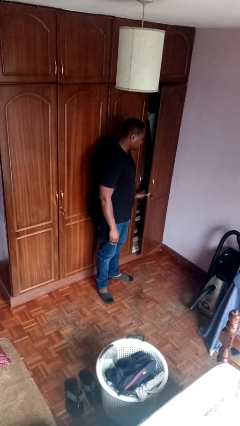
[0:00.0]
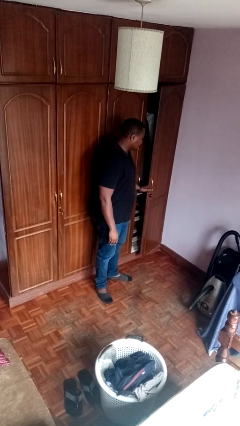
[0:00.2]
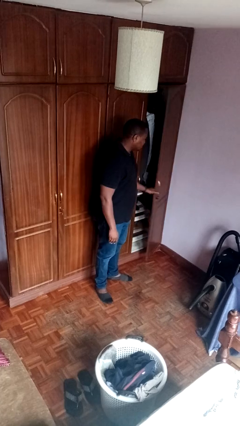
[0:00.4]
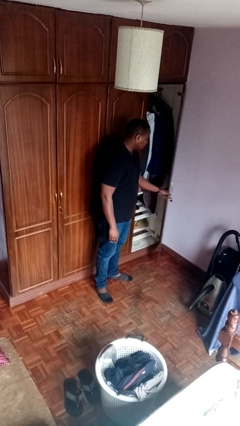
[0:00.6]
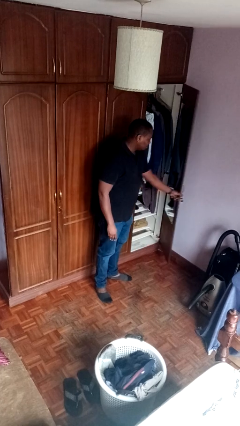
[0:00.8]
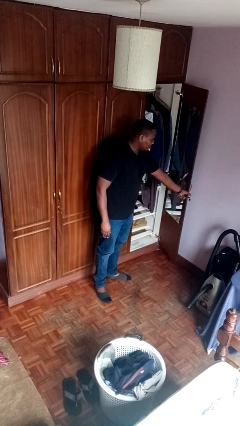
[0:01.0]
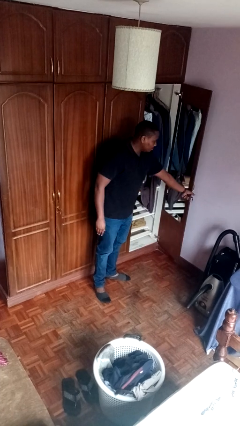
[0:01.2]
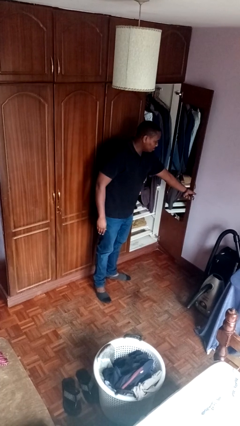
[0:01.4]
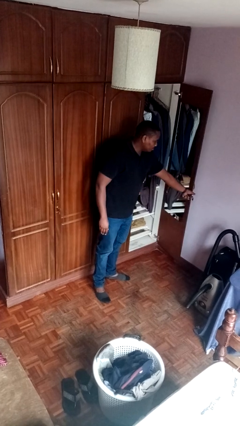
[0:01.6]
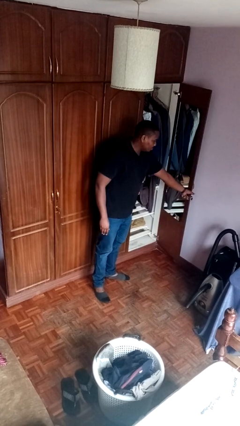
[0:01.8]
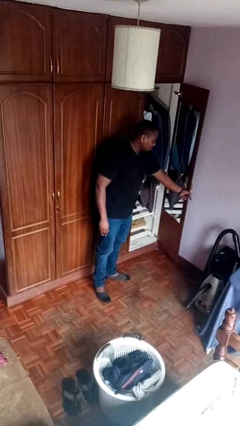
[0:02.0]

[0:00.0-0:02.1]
person opens closet door

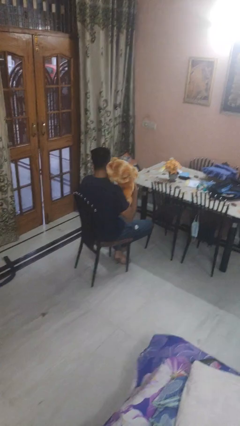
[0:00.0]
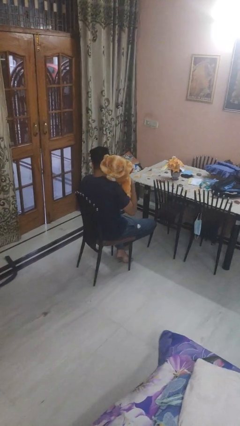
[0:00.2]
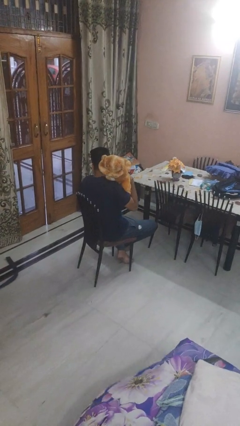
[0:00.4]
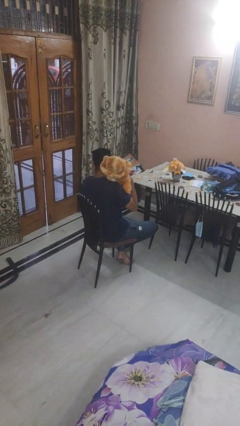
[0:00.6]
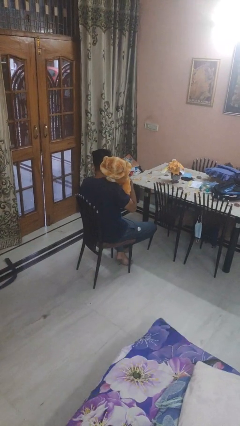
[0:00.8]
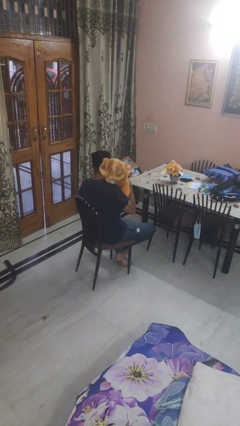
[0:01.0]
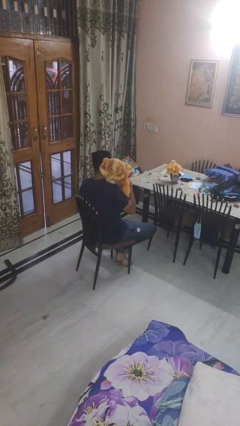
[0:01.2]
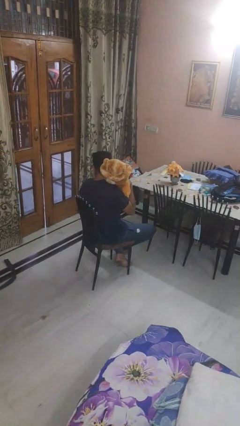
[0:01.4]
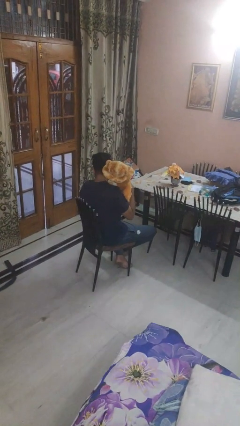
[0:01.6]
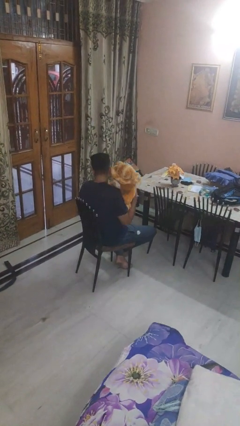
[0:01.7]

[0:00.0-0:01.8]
person hugs stuffed animal

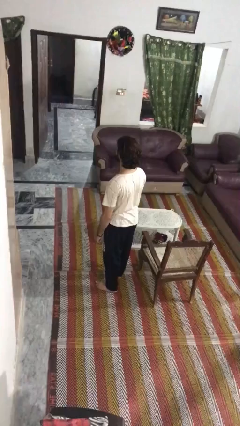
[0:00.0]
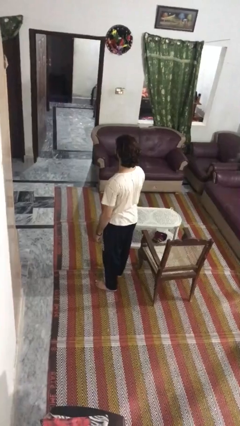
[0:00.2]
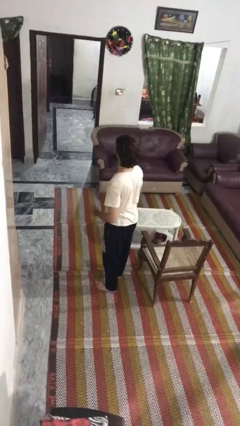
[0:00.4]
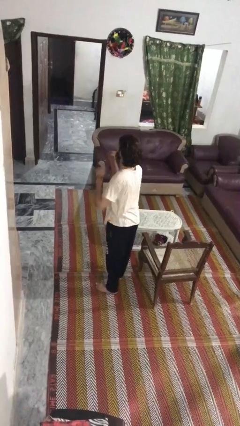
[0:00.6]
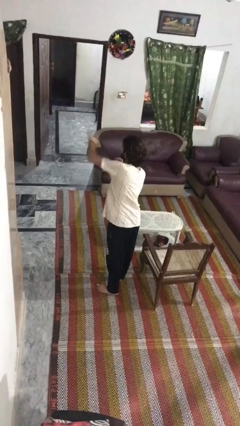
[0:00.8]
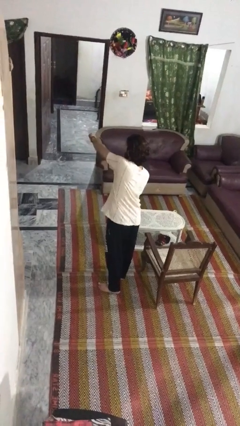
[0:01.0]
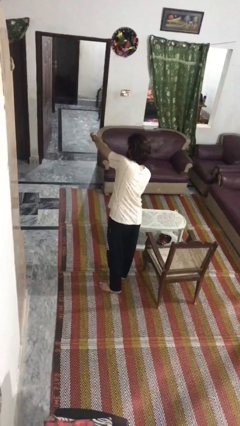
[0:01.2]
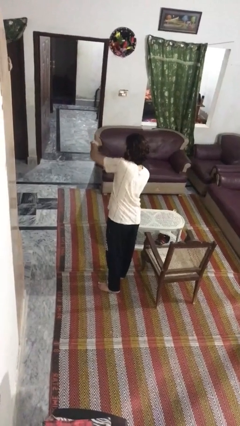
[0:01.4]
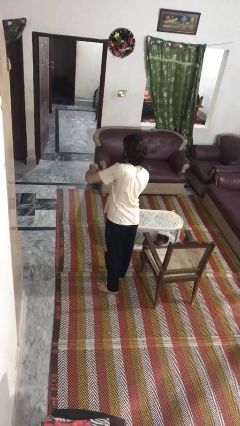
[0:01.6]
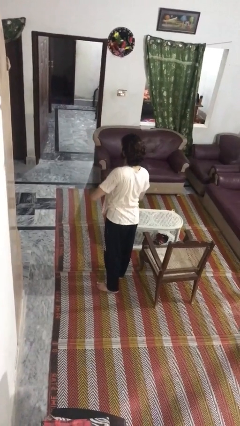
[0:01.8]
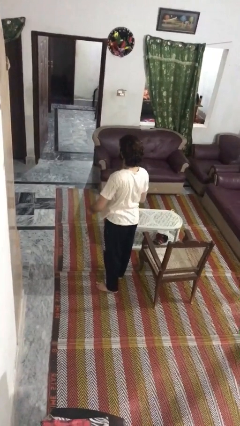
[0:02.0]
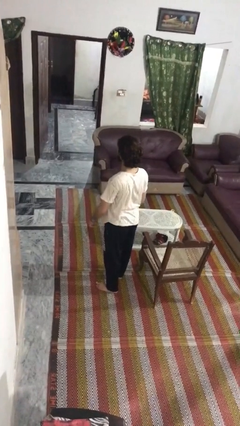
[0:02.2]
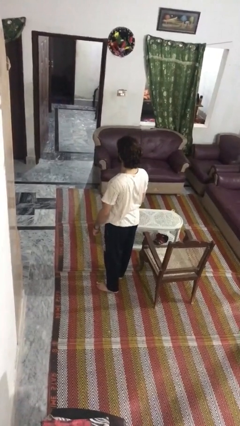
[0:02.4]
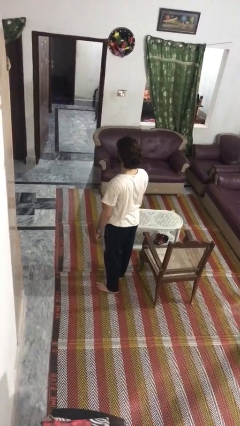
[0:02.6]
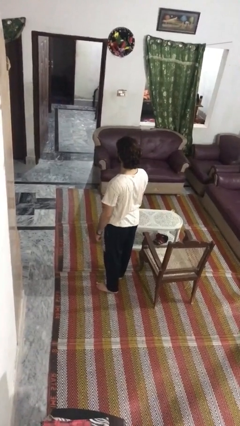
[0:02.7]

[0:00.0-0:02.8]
person punches

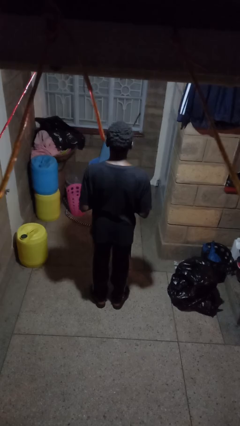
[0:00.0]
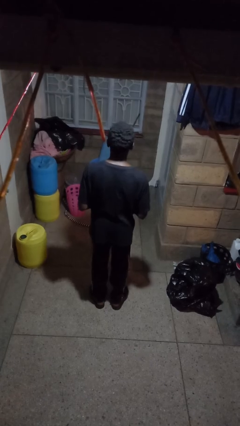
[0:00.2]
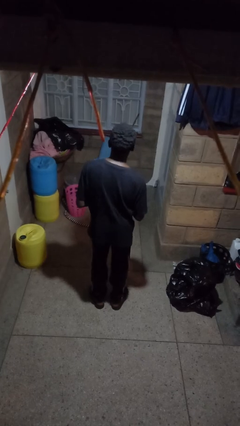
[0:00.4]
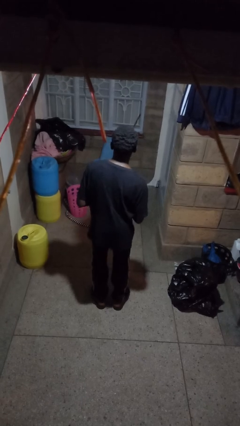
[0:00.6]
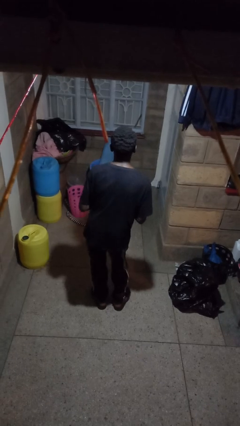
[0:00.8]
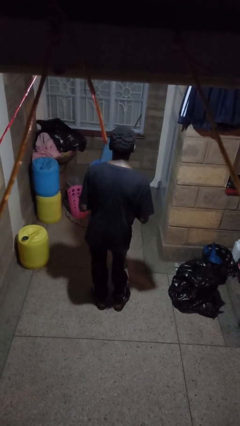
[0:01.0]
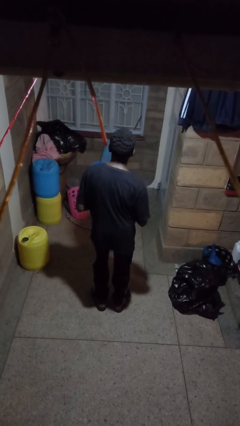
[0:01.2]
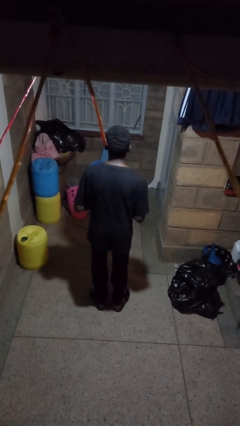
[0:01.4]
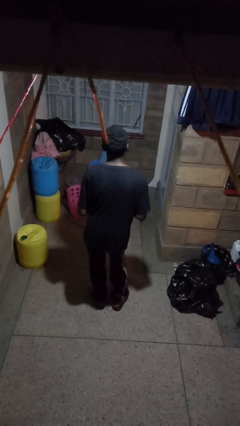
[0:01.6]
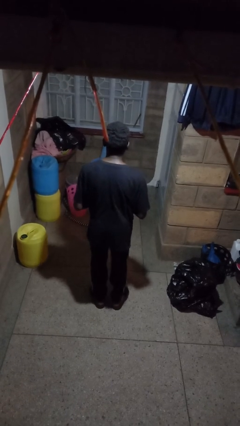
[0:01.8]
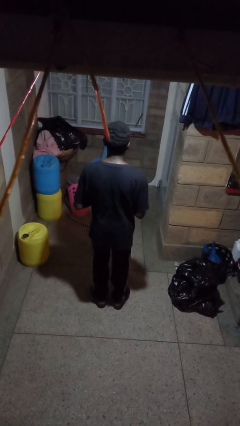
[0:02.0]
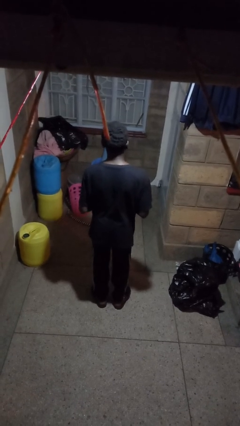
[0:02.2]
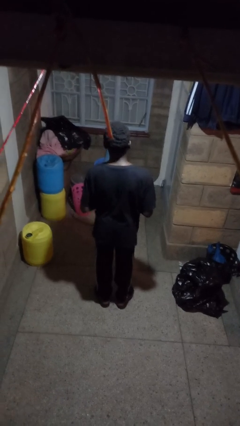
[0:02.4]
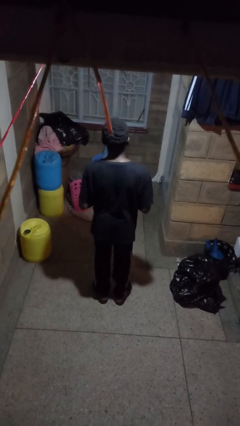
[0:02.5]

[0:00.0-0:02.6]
person wiggles hips

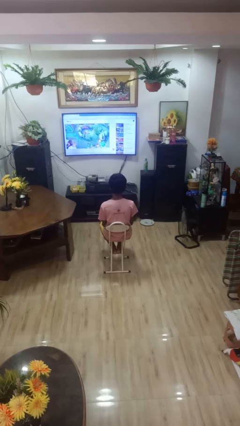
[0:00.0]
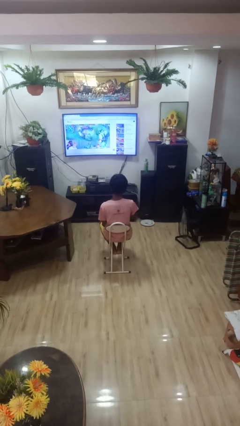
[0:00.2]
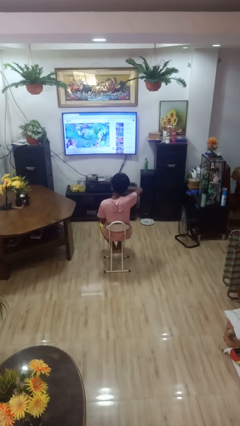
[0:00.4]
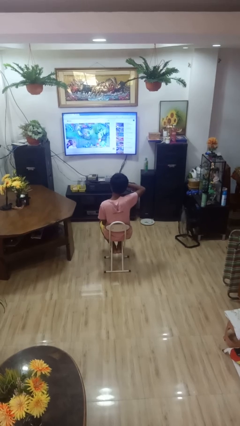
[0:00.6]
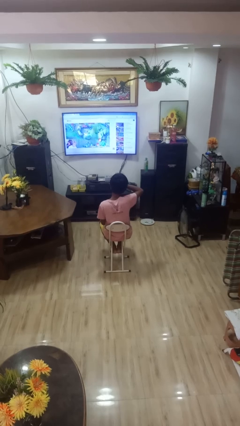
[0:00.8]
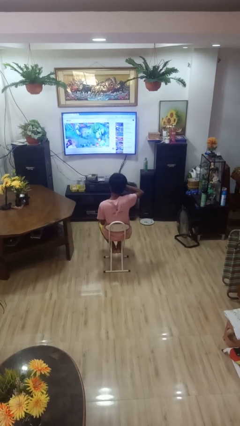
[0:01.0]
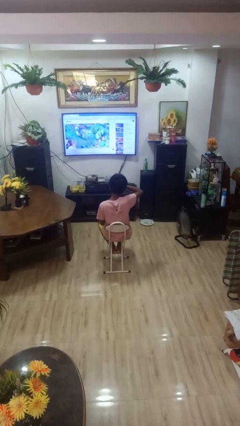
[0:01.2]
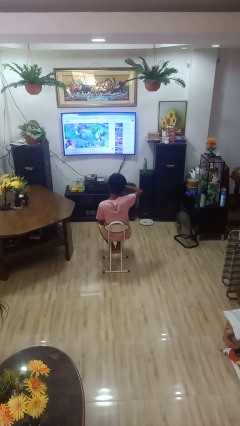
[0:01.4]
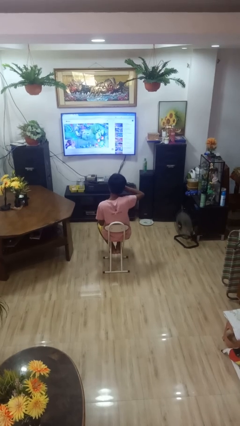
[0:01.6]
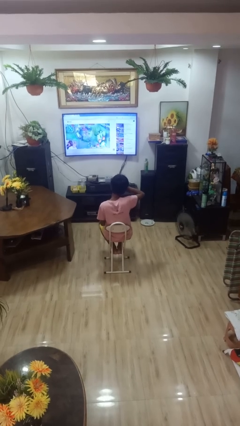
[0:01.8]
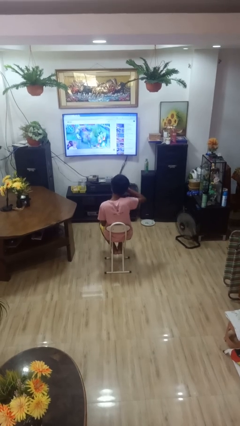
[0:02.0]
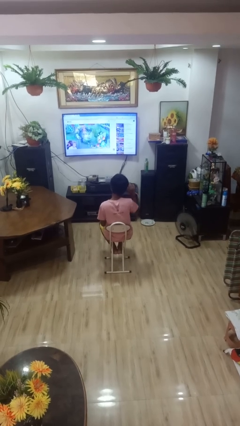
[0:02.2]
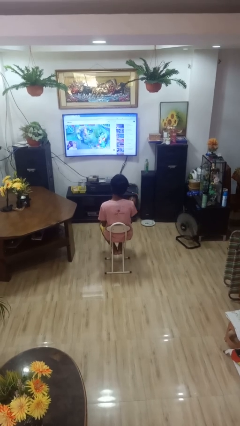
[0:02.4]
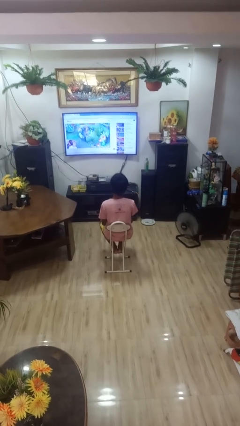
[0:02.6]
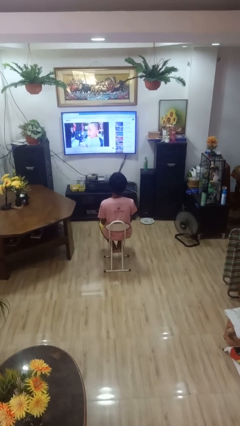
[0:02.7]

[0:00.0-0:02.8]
person rubs eyes

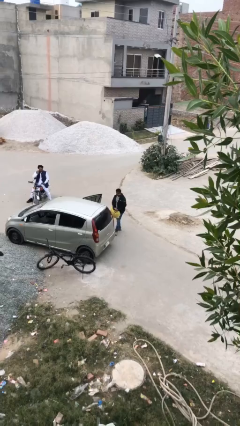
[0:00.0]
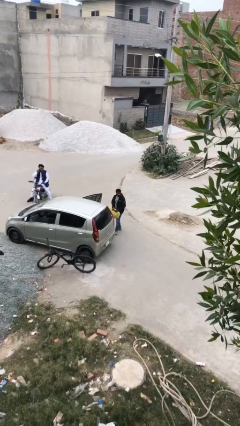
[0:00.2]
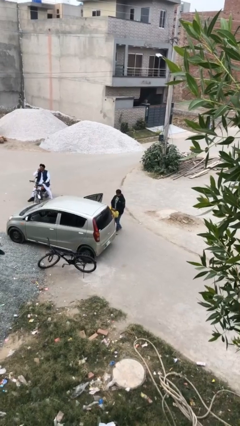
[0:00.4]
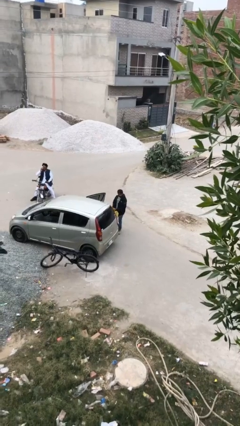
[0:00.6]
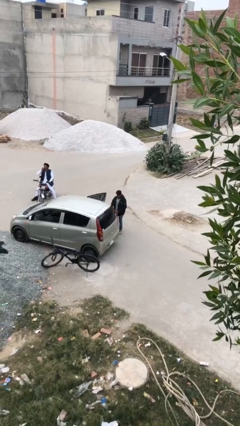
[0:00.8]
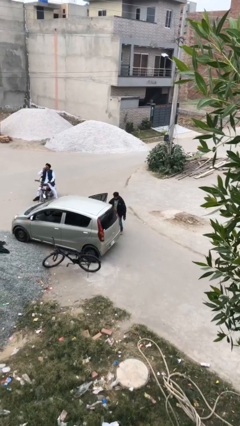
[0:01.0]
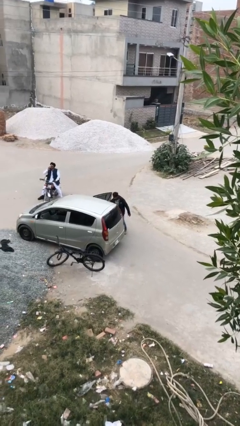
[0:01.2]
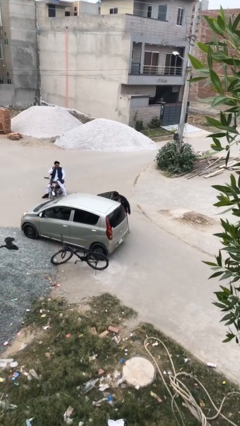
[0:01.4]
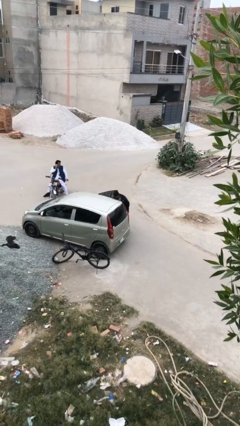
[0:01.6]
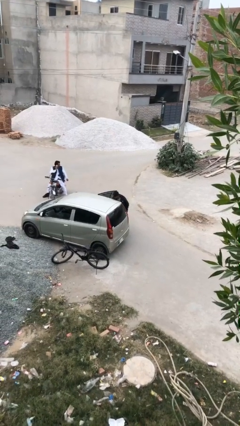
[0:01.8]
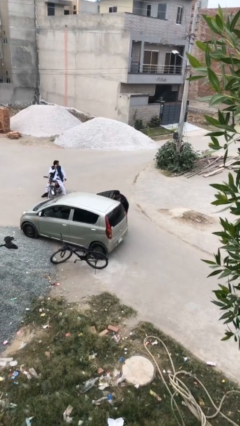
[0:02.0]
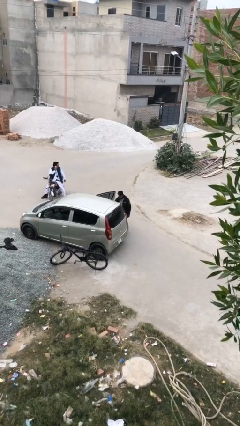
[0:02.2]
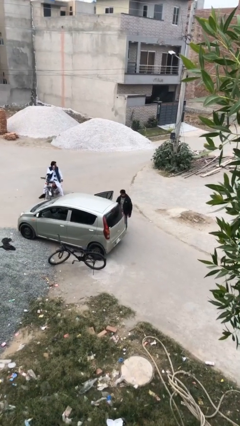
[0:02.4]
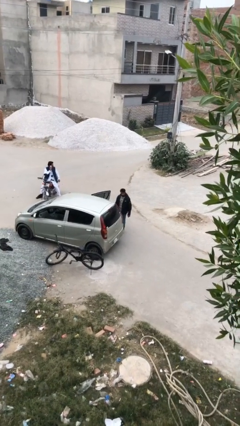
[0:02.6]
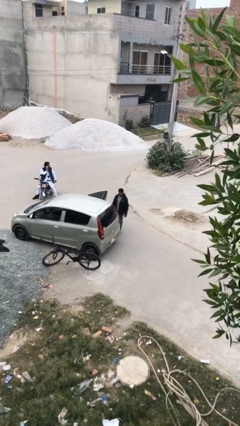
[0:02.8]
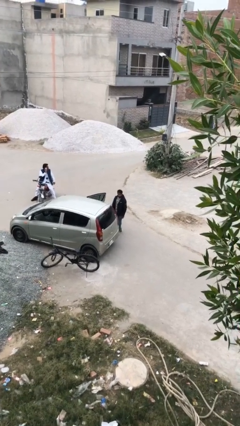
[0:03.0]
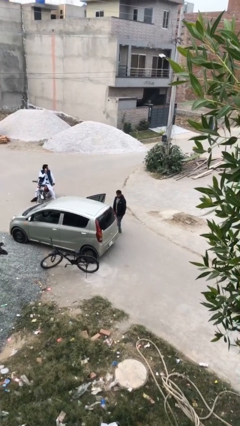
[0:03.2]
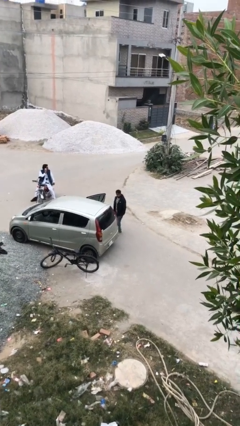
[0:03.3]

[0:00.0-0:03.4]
person loads car

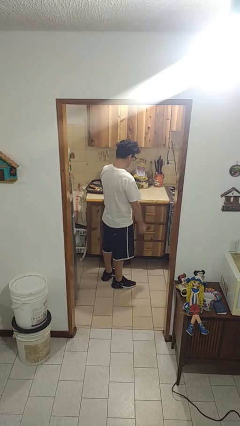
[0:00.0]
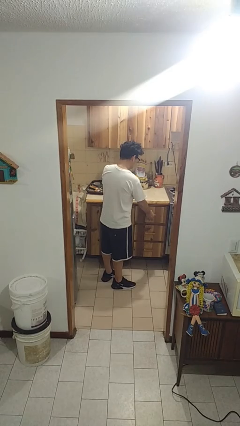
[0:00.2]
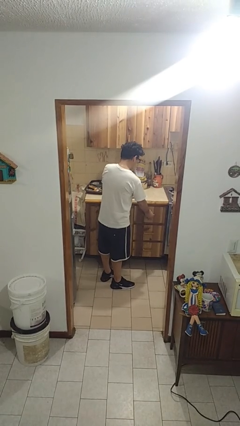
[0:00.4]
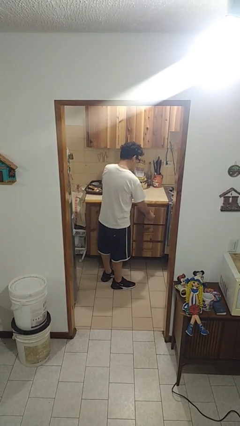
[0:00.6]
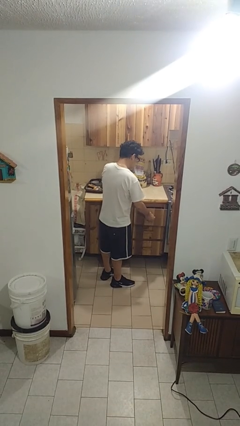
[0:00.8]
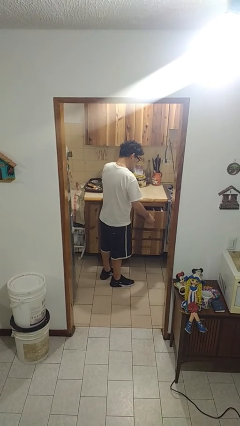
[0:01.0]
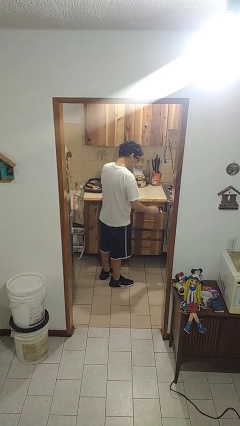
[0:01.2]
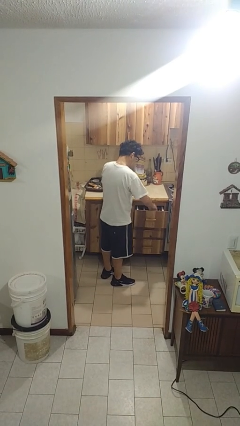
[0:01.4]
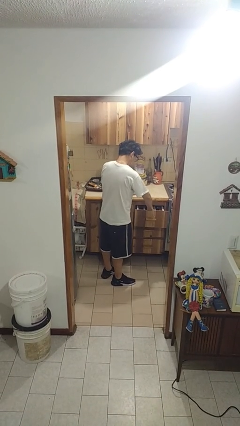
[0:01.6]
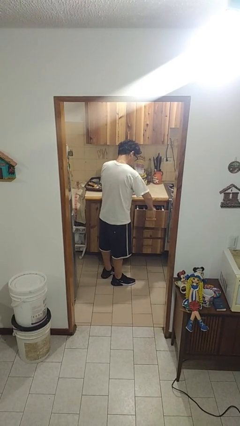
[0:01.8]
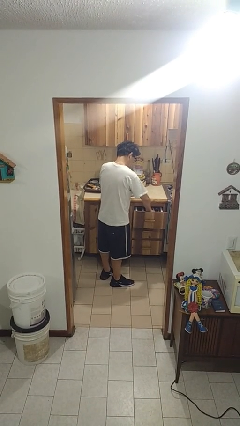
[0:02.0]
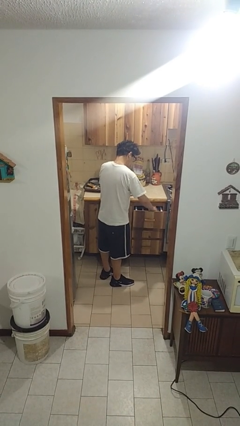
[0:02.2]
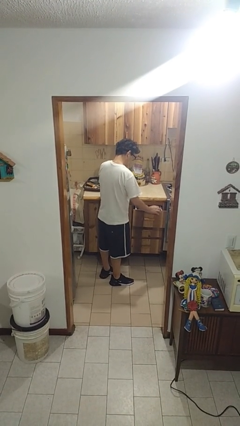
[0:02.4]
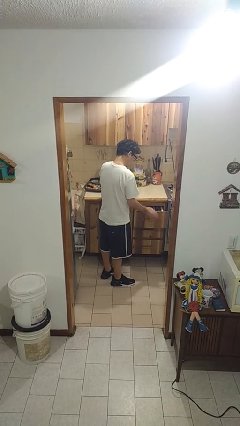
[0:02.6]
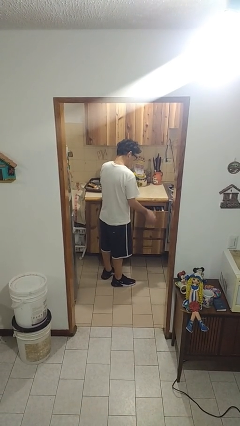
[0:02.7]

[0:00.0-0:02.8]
person searches in kitchen drawer
